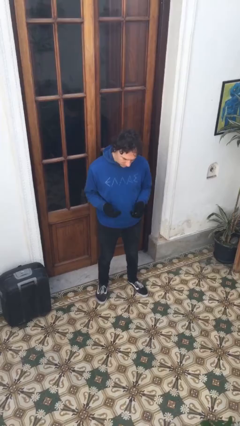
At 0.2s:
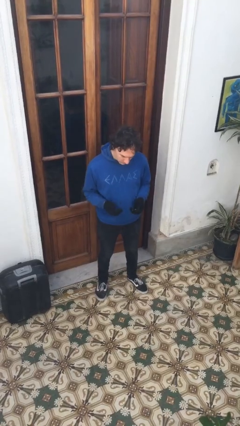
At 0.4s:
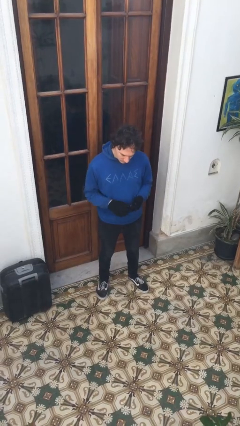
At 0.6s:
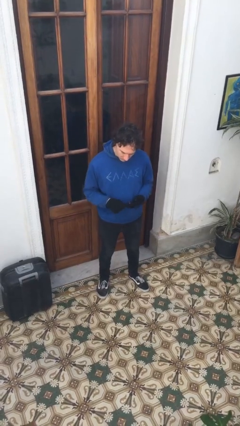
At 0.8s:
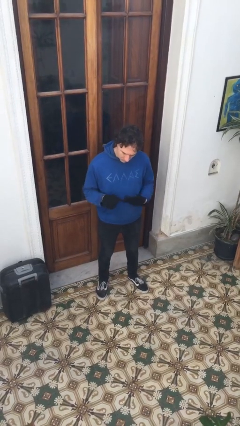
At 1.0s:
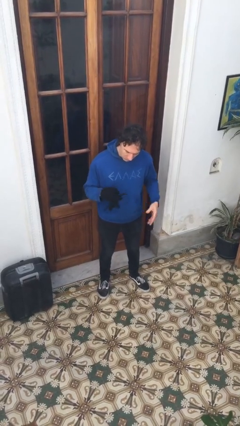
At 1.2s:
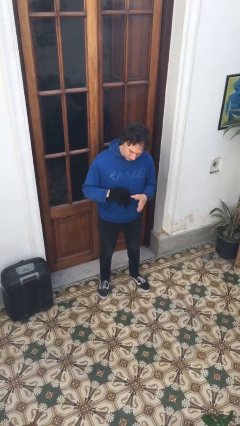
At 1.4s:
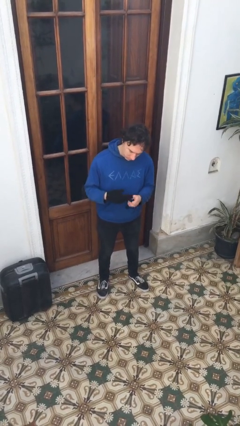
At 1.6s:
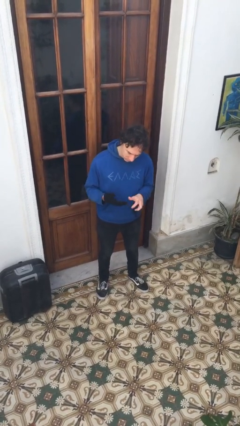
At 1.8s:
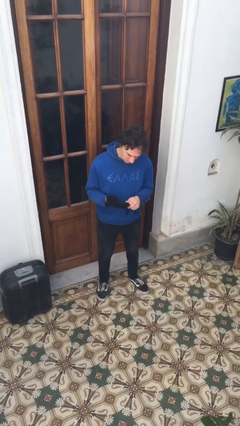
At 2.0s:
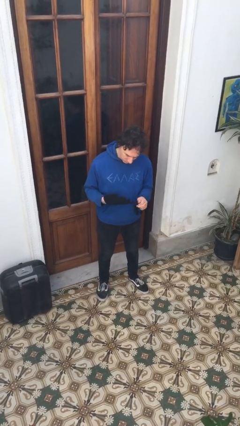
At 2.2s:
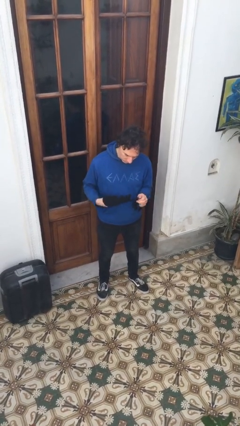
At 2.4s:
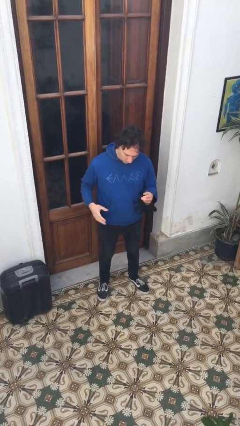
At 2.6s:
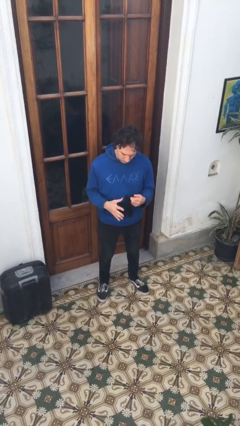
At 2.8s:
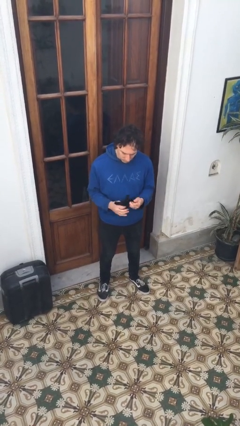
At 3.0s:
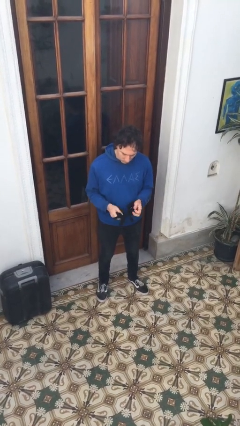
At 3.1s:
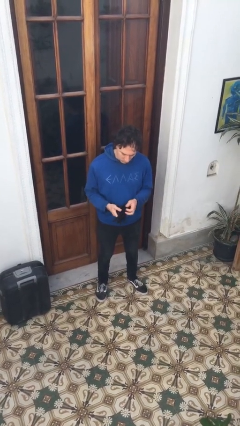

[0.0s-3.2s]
person takes off gloves

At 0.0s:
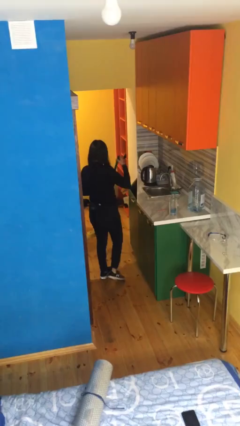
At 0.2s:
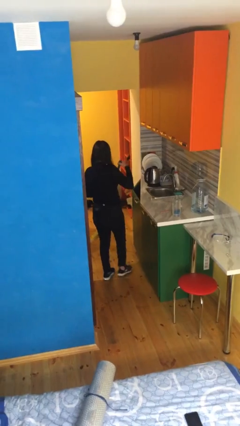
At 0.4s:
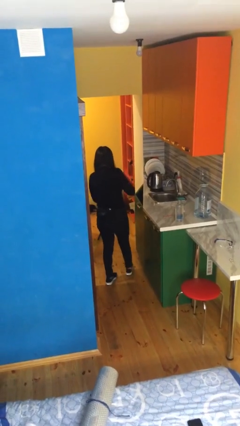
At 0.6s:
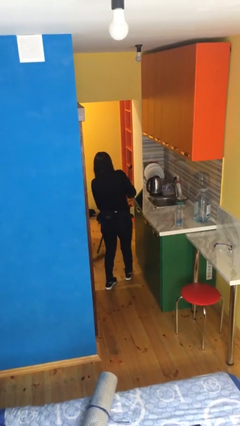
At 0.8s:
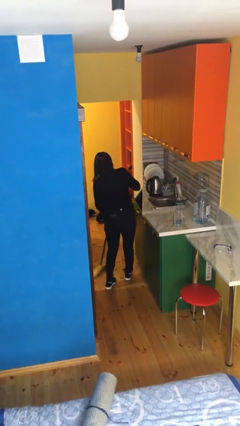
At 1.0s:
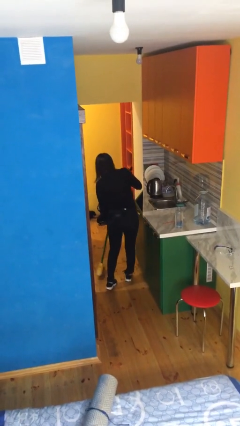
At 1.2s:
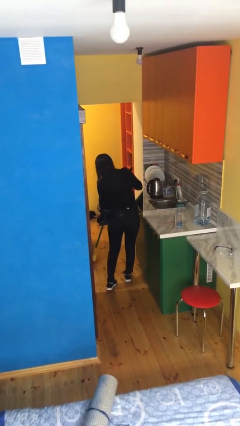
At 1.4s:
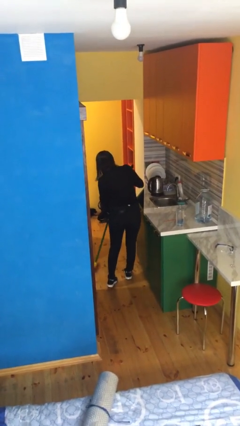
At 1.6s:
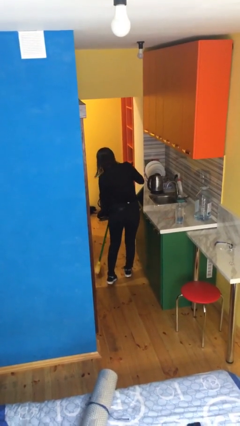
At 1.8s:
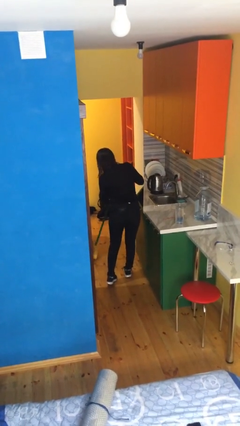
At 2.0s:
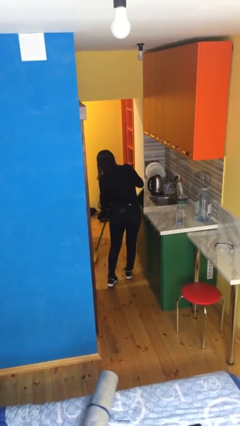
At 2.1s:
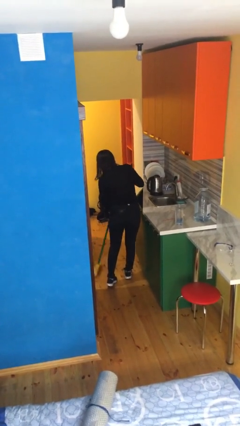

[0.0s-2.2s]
person sweeps floor

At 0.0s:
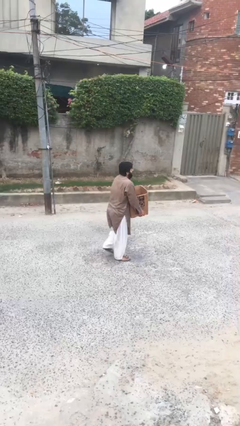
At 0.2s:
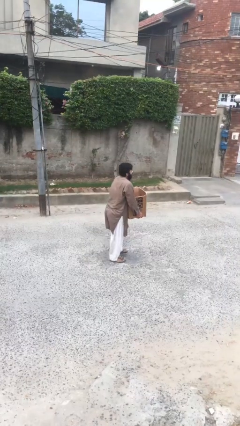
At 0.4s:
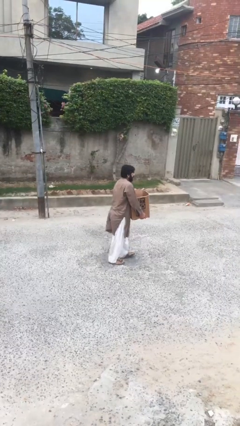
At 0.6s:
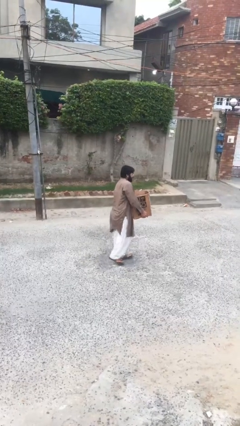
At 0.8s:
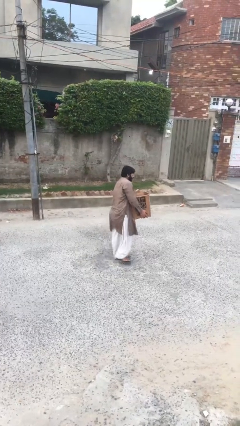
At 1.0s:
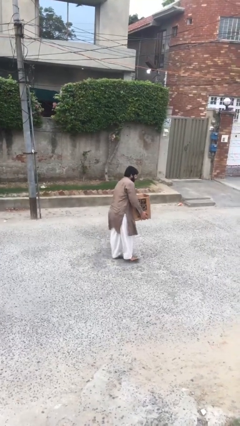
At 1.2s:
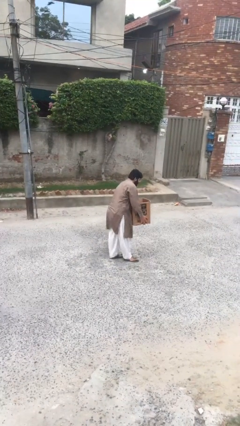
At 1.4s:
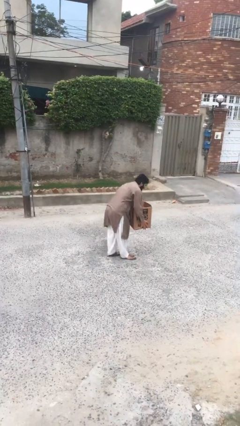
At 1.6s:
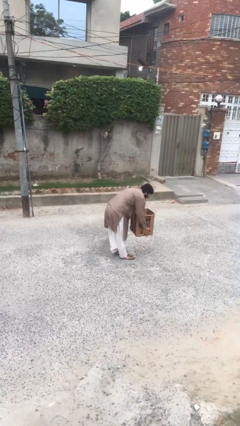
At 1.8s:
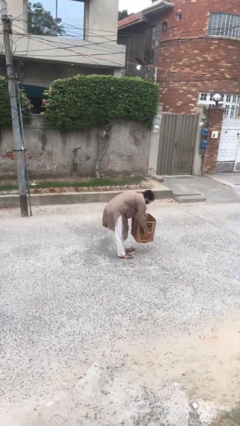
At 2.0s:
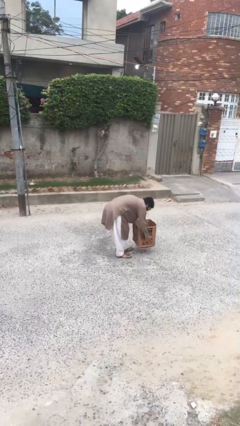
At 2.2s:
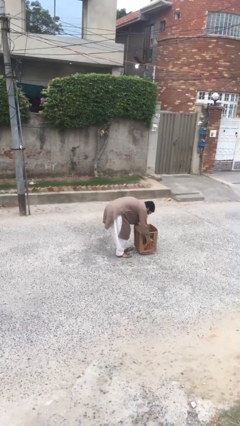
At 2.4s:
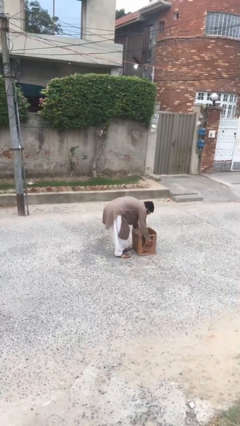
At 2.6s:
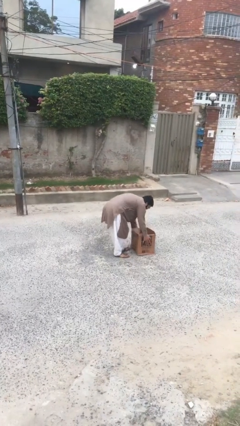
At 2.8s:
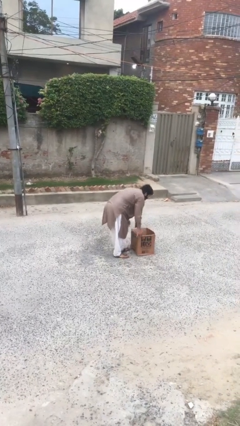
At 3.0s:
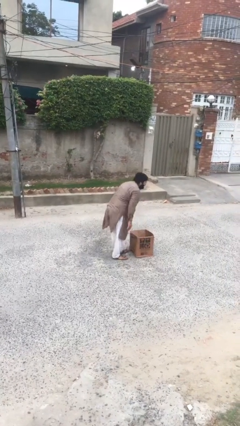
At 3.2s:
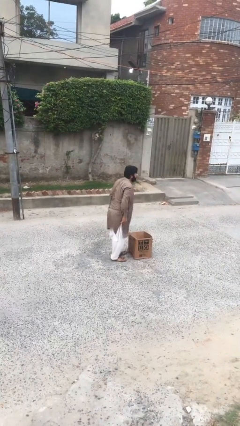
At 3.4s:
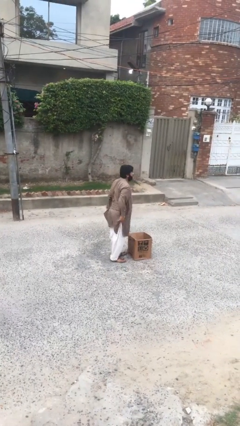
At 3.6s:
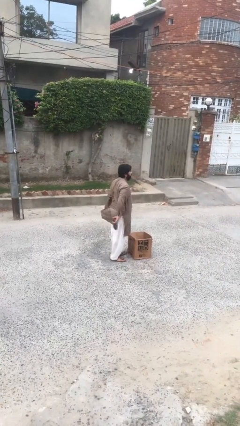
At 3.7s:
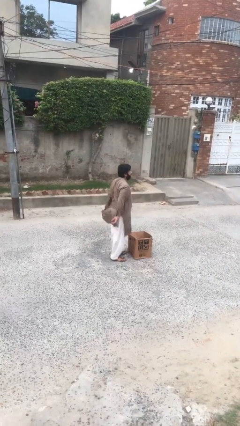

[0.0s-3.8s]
person puts down object on floor

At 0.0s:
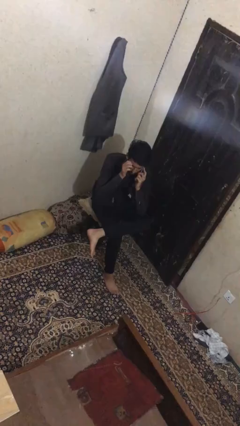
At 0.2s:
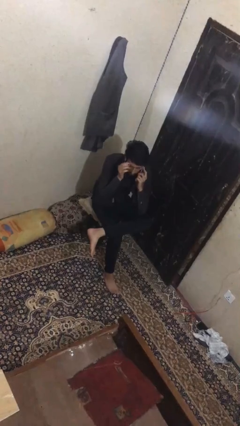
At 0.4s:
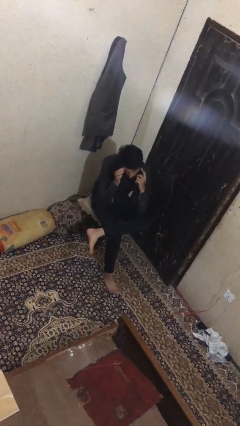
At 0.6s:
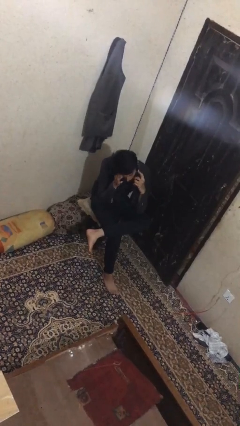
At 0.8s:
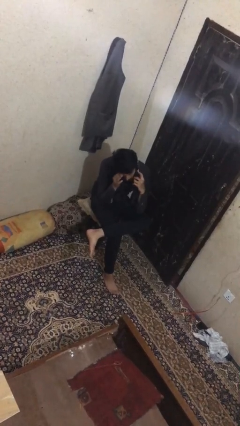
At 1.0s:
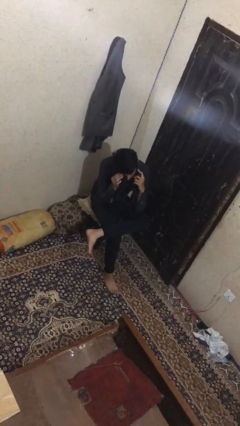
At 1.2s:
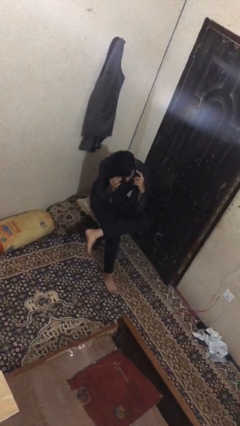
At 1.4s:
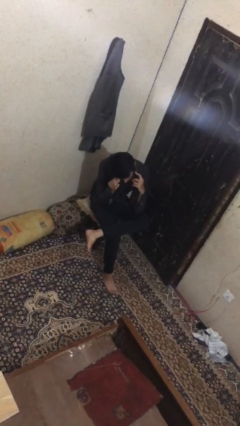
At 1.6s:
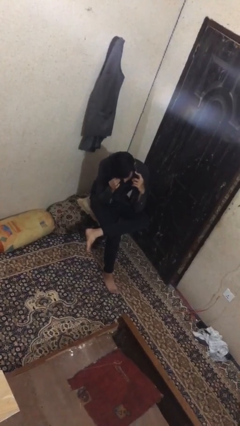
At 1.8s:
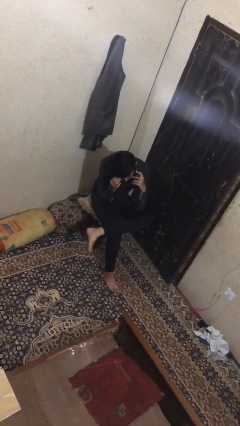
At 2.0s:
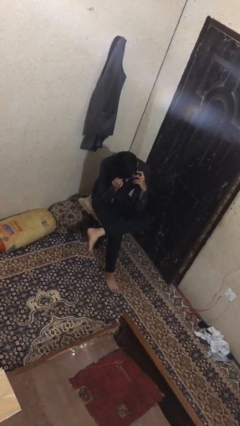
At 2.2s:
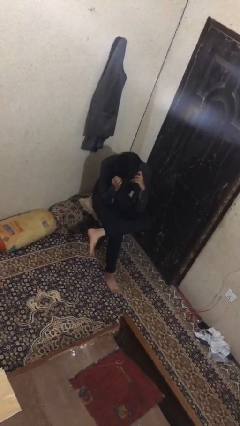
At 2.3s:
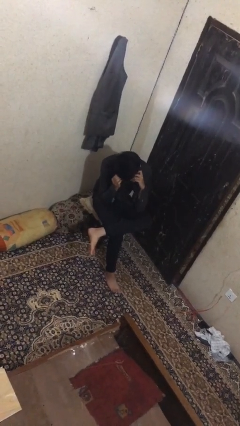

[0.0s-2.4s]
person talks on phone

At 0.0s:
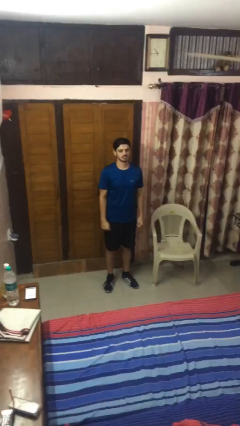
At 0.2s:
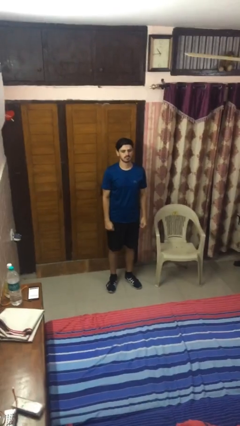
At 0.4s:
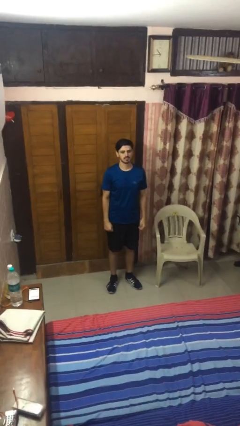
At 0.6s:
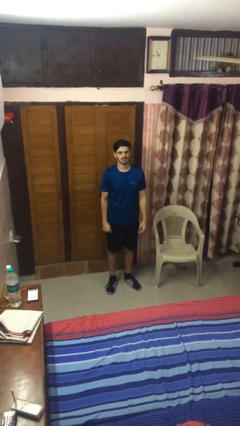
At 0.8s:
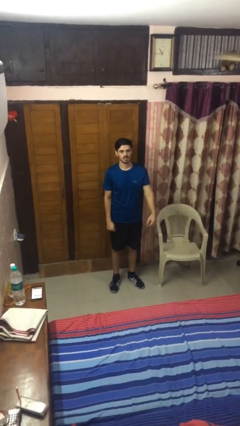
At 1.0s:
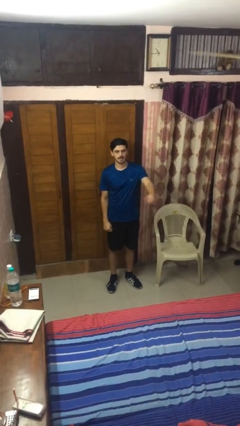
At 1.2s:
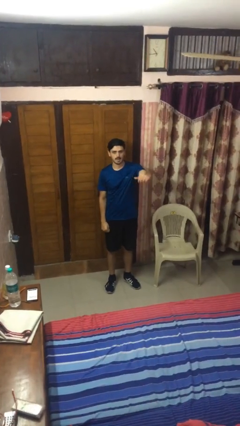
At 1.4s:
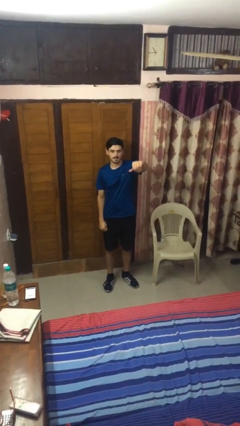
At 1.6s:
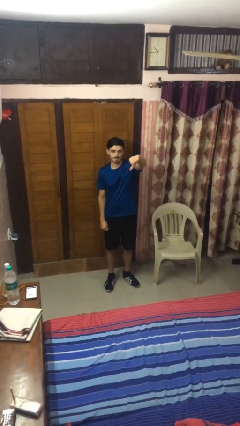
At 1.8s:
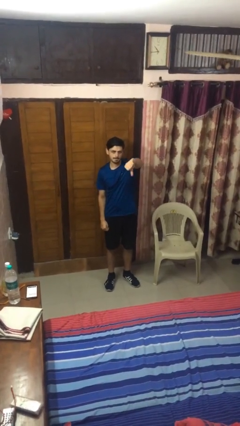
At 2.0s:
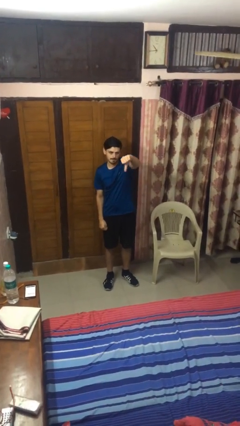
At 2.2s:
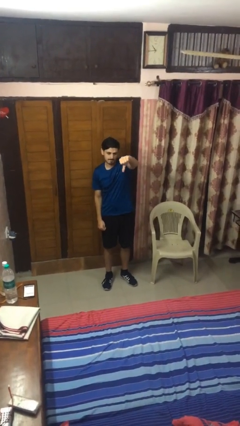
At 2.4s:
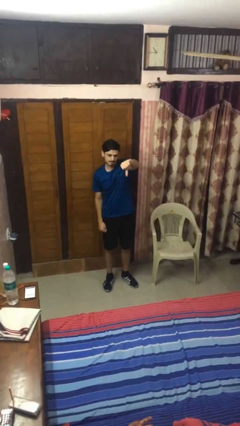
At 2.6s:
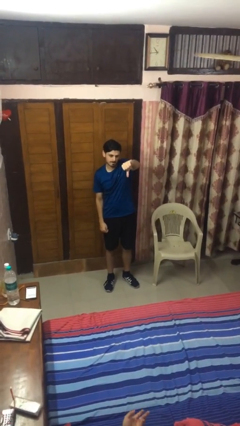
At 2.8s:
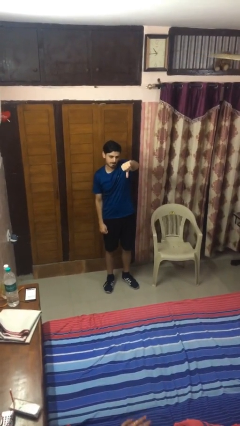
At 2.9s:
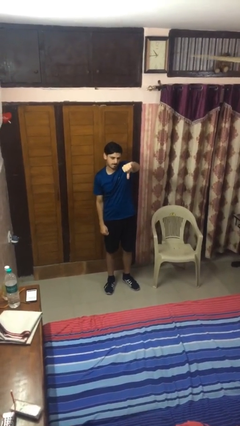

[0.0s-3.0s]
person gestures thumbs down

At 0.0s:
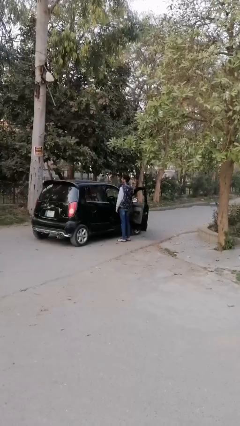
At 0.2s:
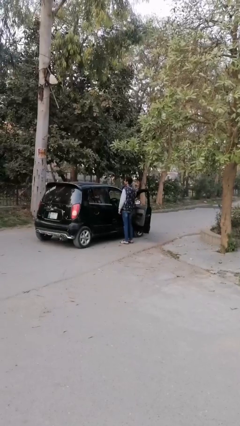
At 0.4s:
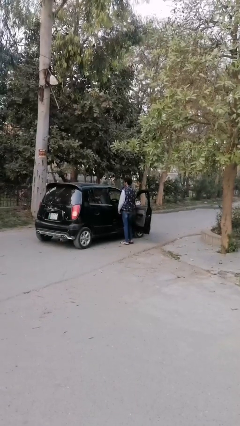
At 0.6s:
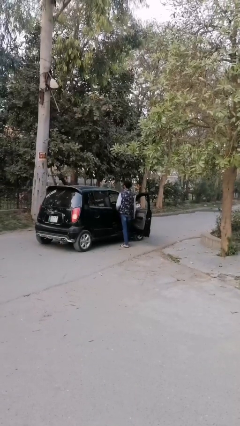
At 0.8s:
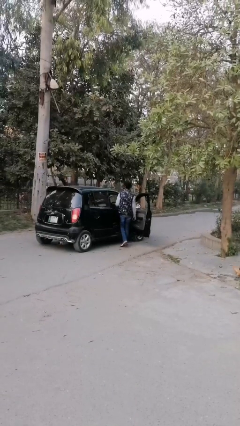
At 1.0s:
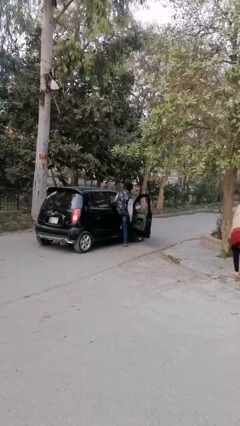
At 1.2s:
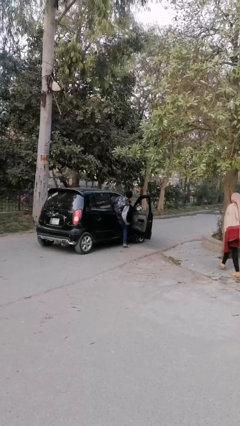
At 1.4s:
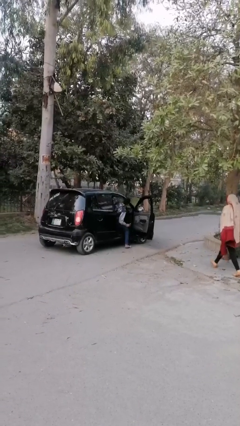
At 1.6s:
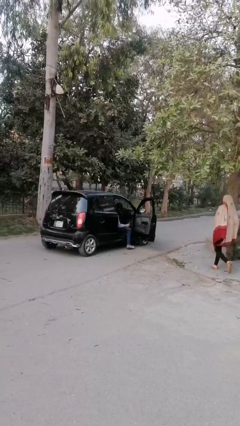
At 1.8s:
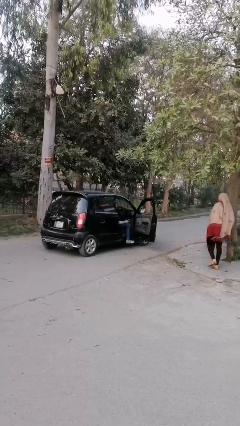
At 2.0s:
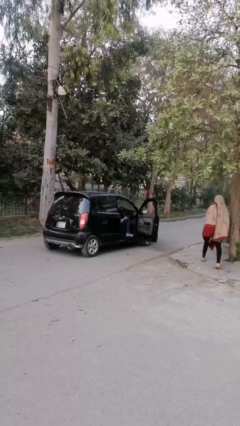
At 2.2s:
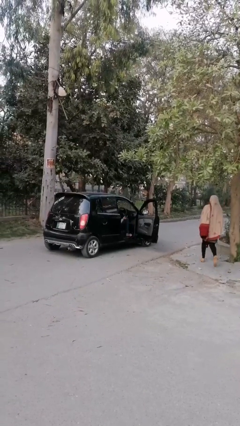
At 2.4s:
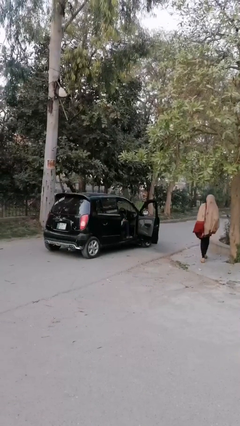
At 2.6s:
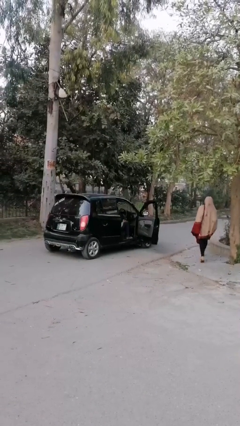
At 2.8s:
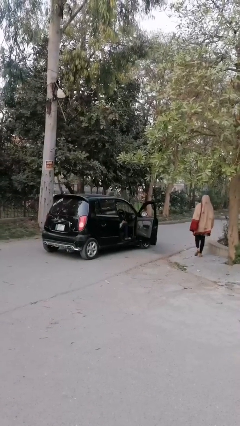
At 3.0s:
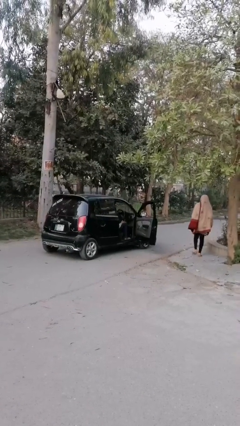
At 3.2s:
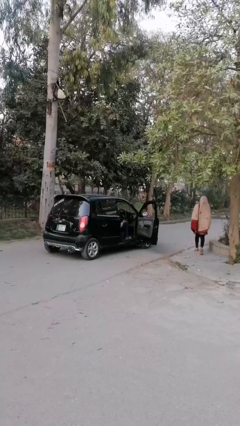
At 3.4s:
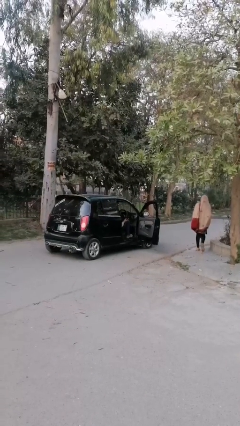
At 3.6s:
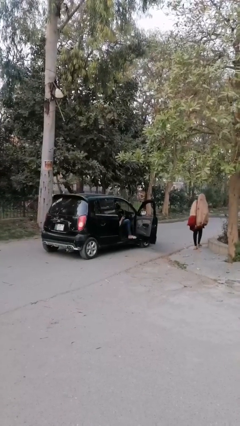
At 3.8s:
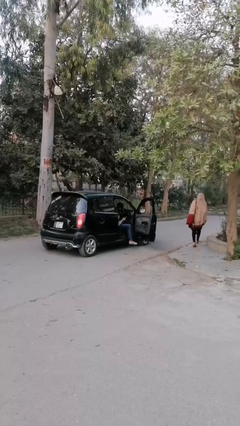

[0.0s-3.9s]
person enters car
